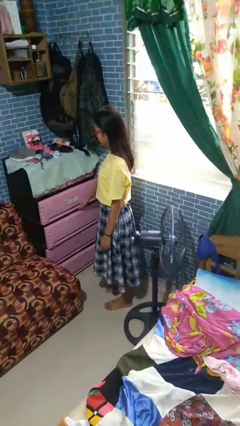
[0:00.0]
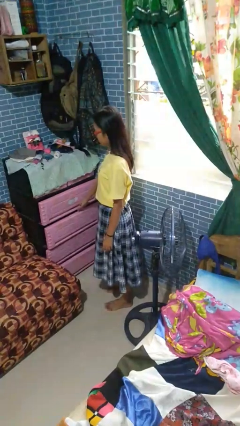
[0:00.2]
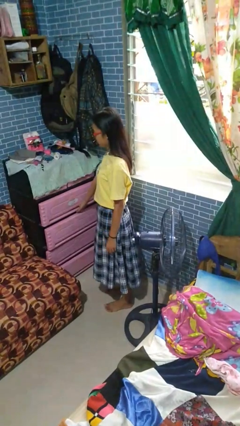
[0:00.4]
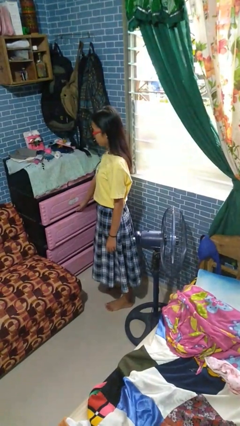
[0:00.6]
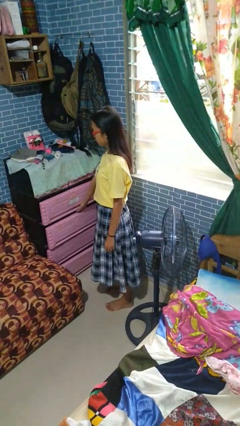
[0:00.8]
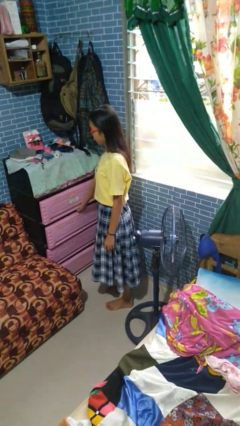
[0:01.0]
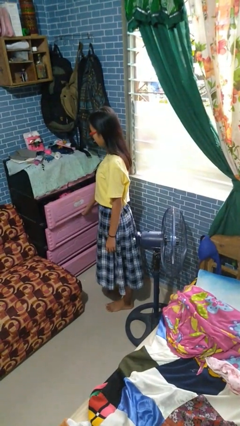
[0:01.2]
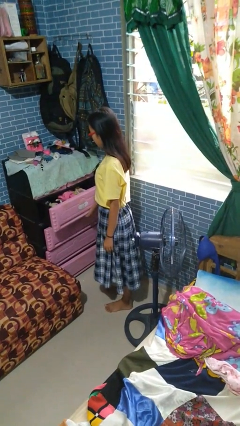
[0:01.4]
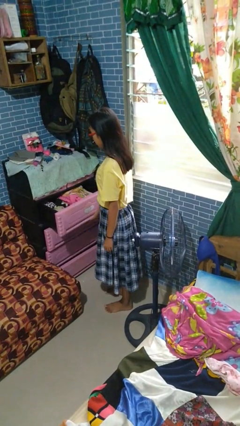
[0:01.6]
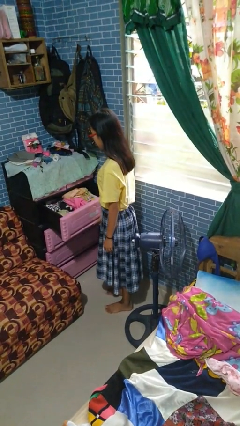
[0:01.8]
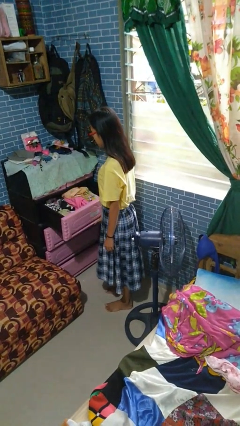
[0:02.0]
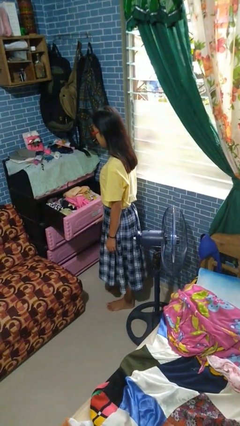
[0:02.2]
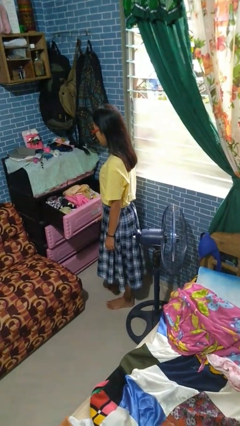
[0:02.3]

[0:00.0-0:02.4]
person opens dresser drawer

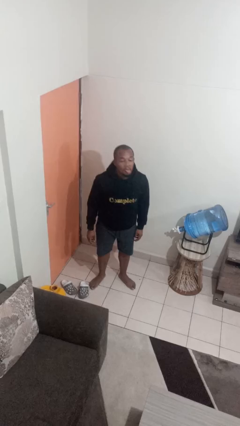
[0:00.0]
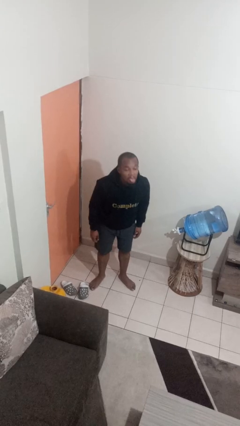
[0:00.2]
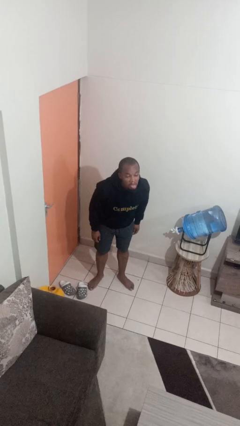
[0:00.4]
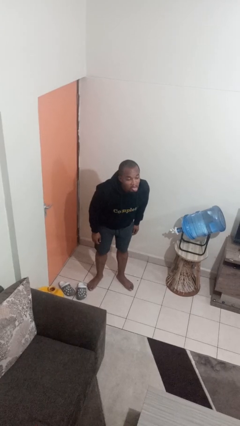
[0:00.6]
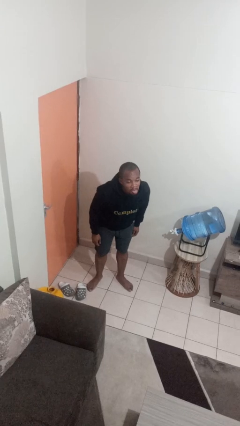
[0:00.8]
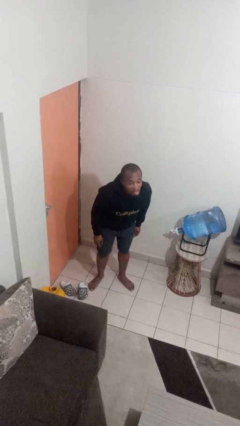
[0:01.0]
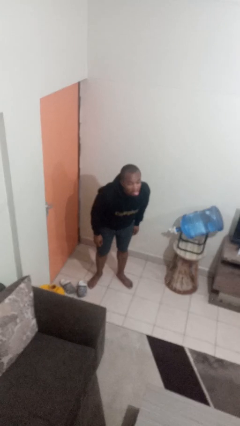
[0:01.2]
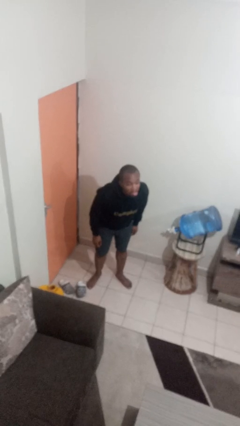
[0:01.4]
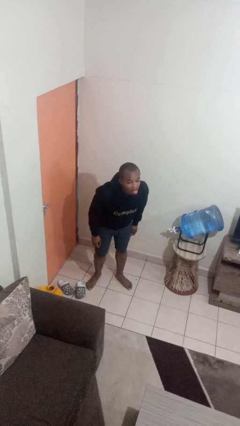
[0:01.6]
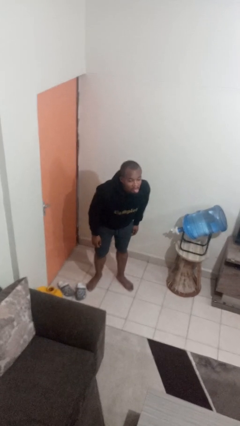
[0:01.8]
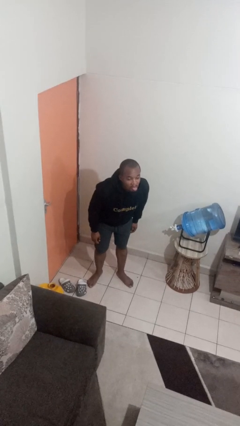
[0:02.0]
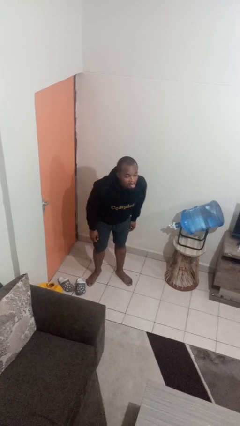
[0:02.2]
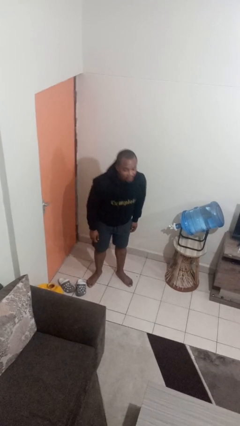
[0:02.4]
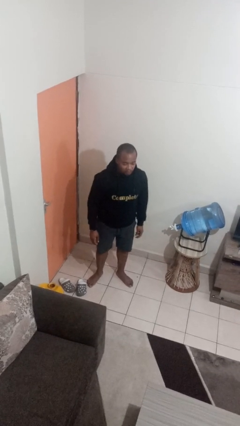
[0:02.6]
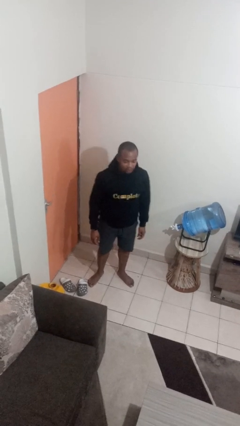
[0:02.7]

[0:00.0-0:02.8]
person sticks out tongue

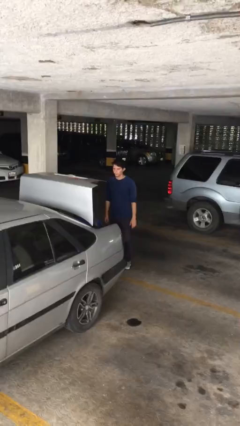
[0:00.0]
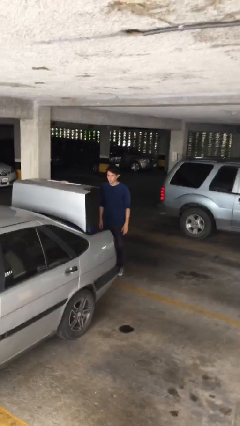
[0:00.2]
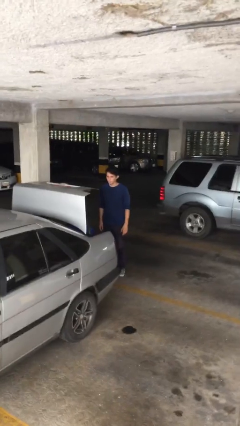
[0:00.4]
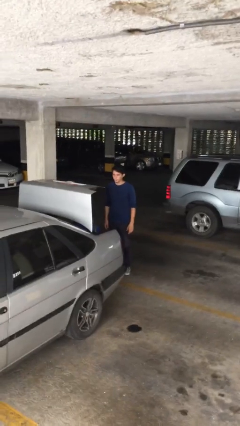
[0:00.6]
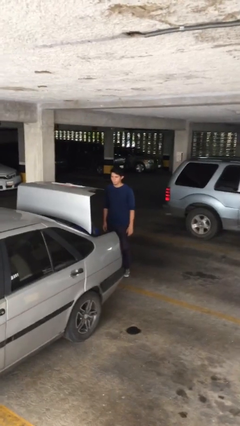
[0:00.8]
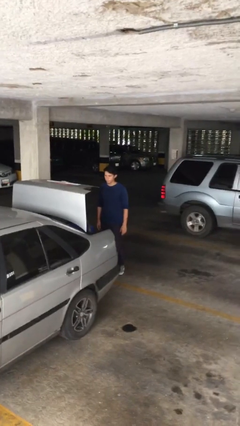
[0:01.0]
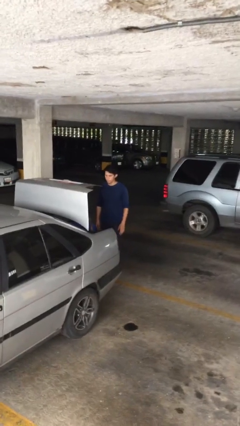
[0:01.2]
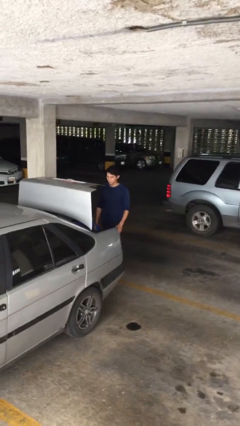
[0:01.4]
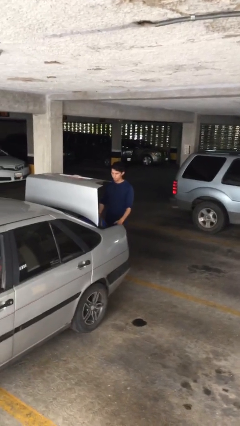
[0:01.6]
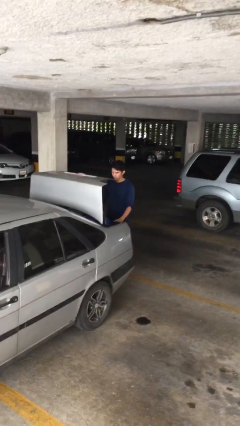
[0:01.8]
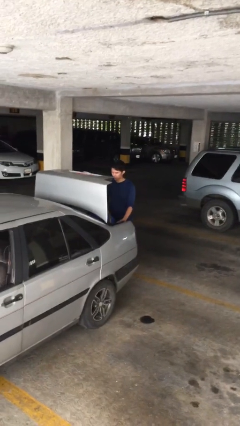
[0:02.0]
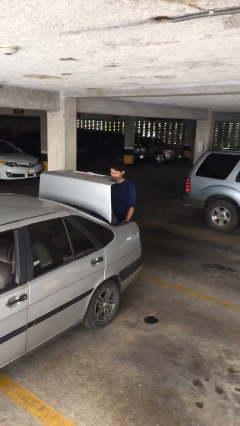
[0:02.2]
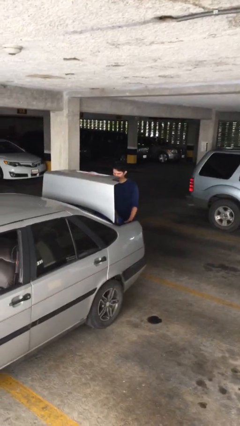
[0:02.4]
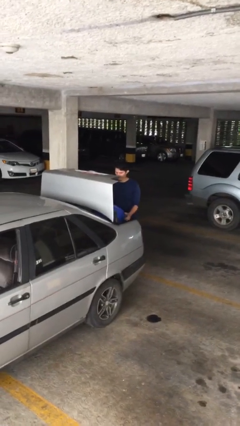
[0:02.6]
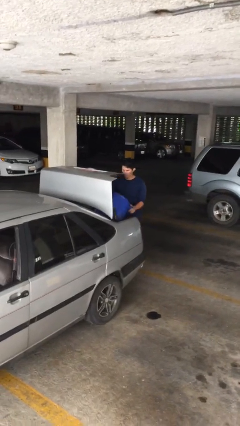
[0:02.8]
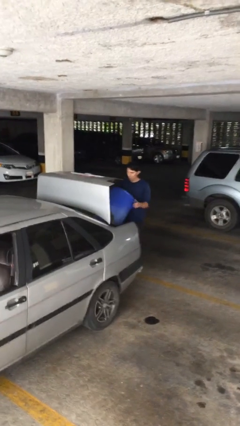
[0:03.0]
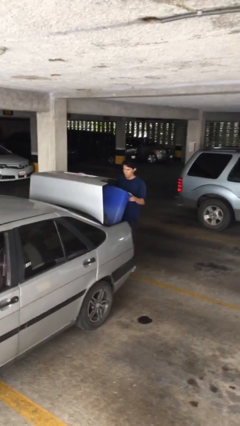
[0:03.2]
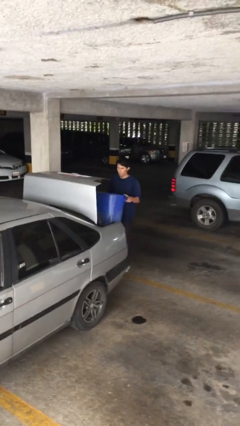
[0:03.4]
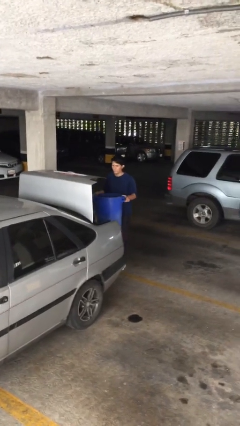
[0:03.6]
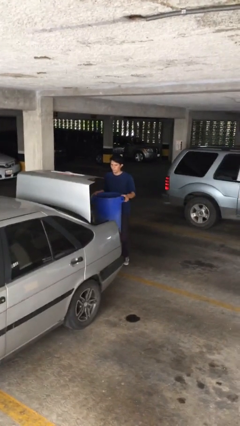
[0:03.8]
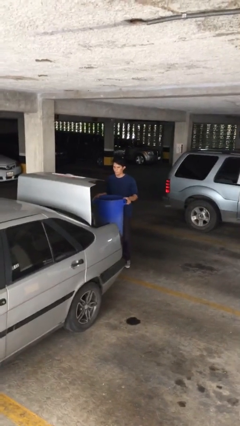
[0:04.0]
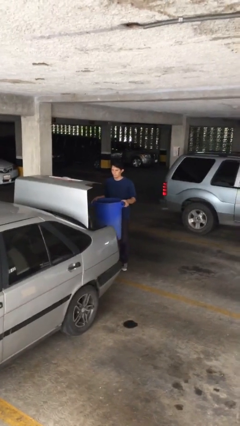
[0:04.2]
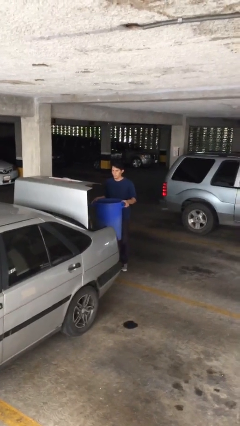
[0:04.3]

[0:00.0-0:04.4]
person unloads car

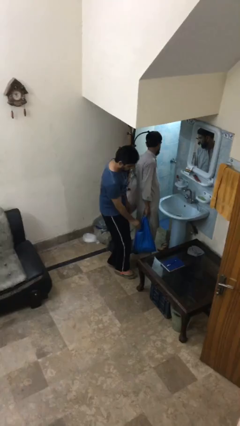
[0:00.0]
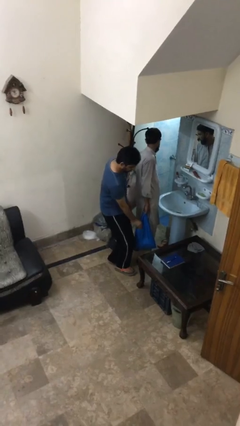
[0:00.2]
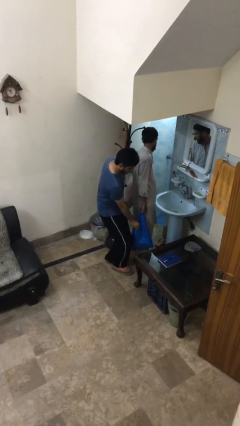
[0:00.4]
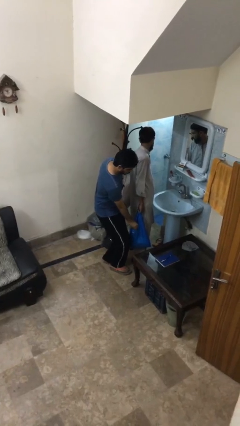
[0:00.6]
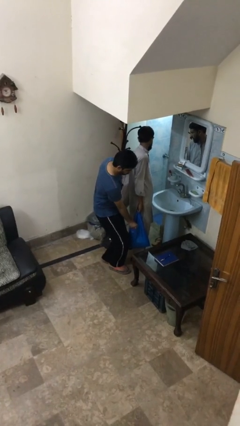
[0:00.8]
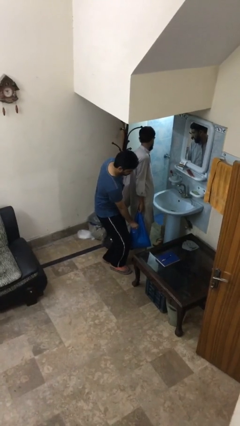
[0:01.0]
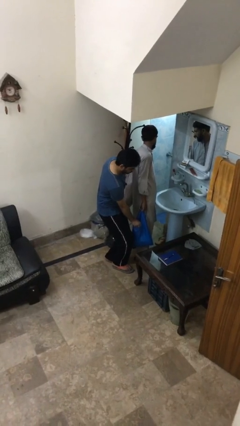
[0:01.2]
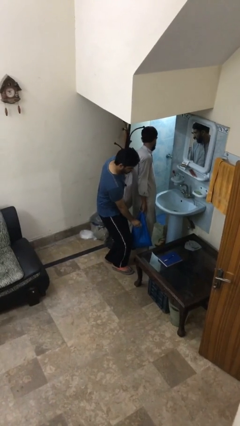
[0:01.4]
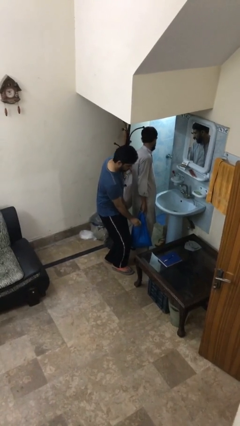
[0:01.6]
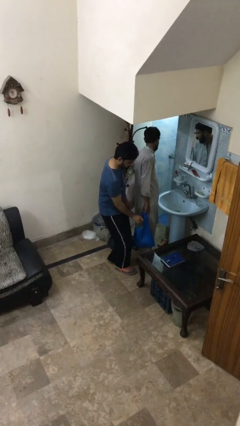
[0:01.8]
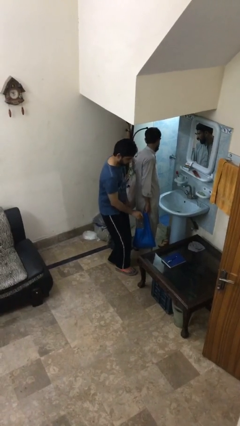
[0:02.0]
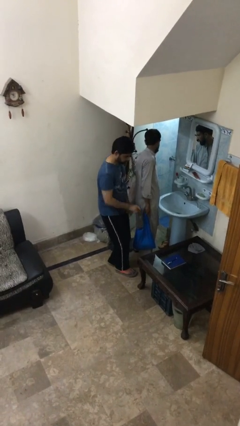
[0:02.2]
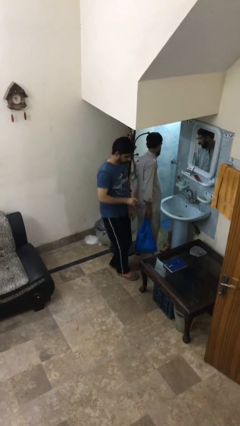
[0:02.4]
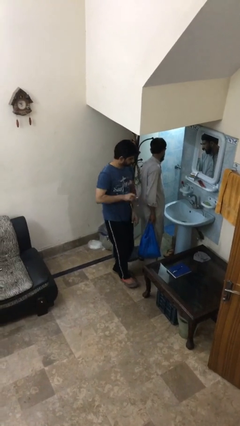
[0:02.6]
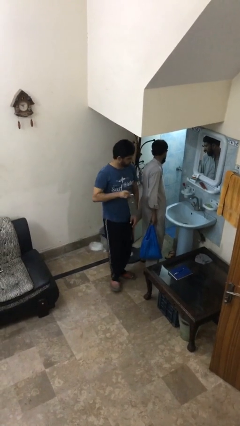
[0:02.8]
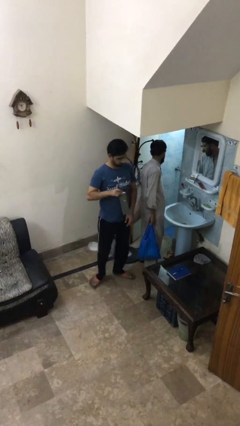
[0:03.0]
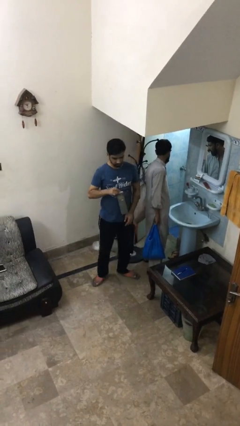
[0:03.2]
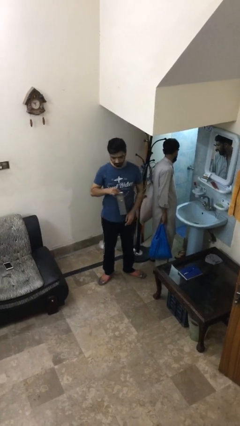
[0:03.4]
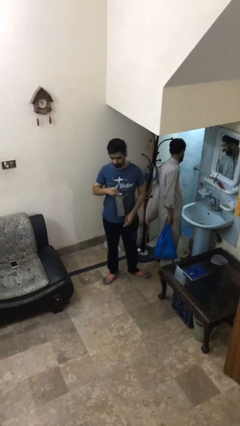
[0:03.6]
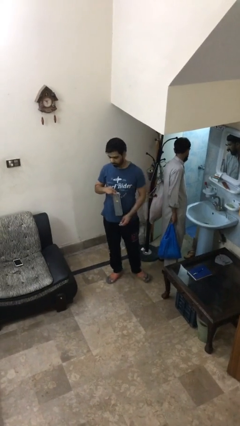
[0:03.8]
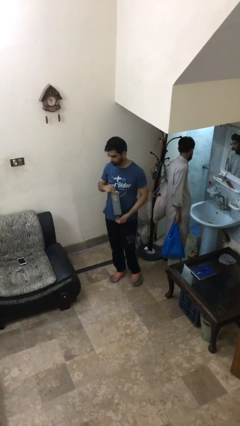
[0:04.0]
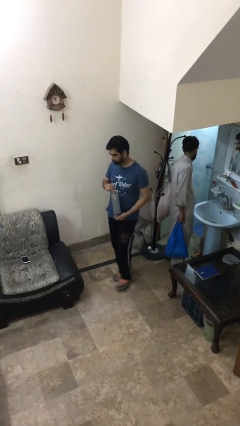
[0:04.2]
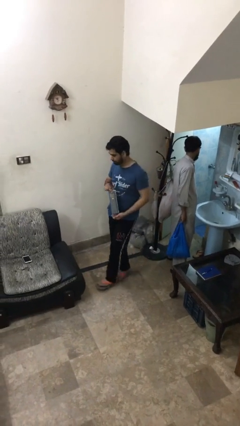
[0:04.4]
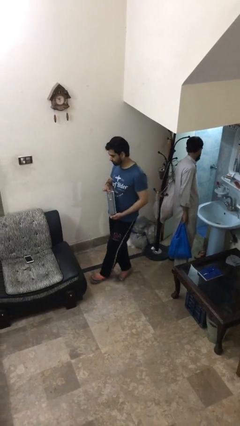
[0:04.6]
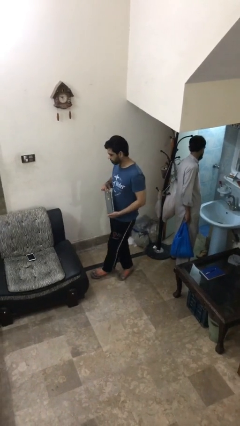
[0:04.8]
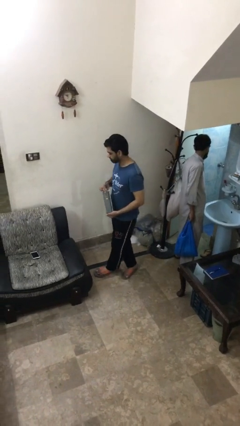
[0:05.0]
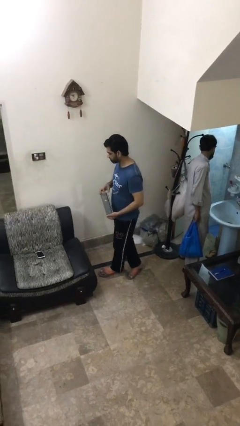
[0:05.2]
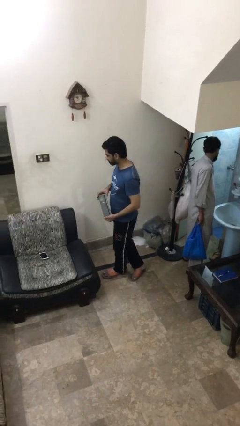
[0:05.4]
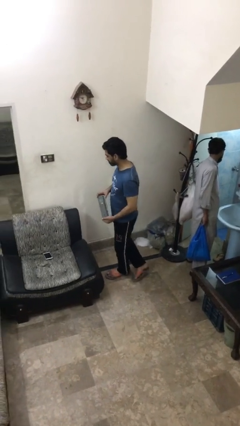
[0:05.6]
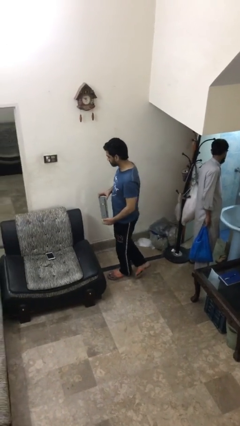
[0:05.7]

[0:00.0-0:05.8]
person steals object from person

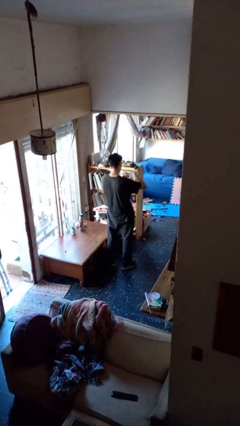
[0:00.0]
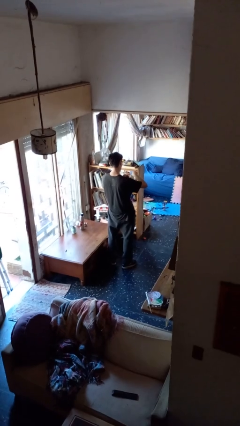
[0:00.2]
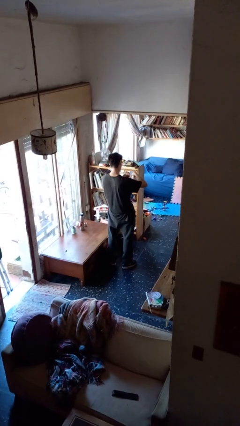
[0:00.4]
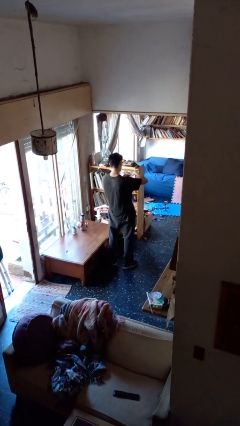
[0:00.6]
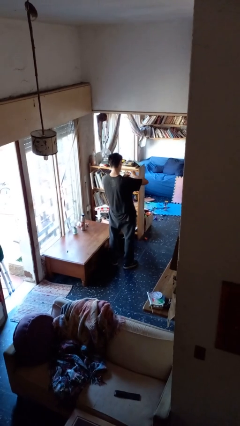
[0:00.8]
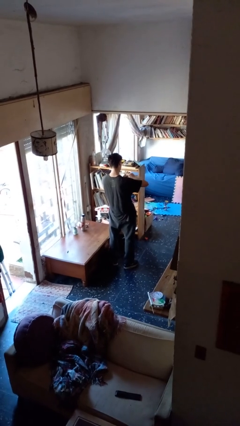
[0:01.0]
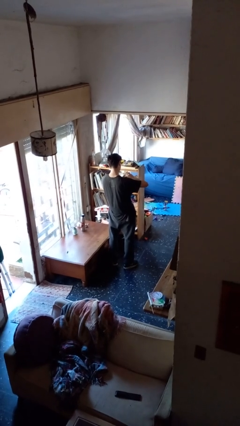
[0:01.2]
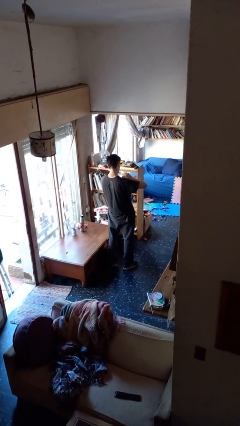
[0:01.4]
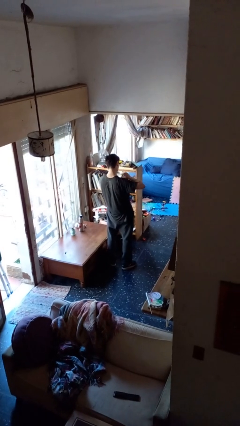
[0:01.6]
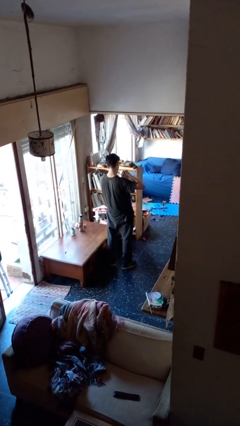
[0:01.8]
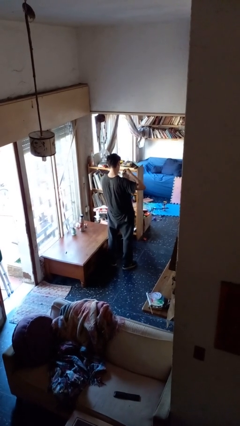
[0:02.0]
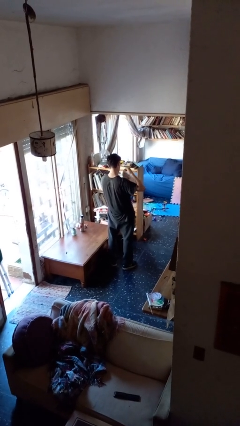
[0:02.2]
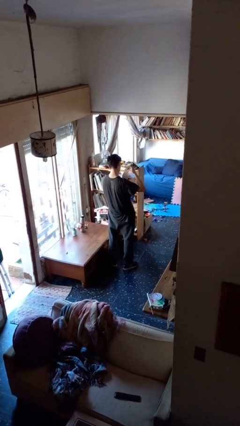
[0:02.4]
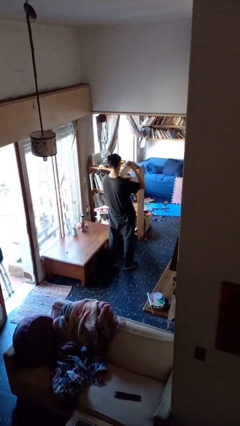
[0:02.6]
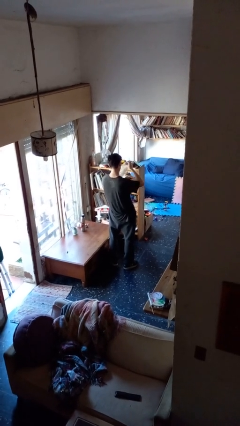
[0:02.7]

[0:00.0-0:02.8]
person tears paper
